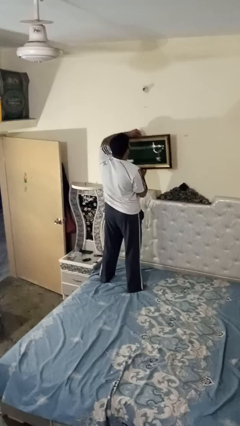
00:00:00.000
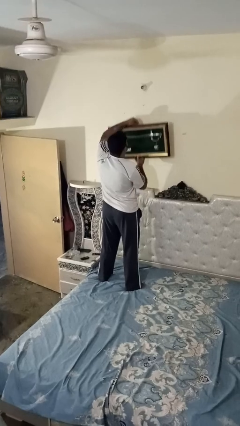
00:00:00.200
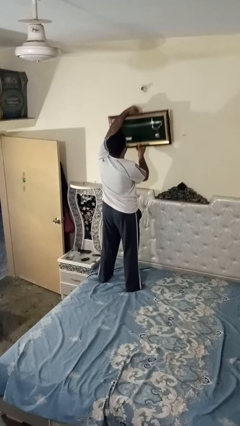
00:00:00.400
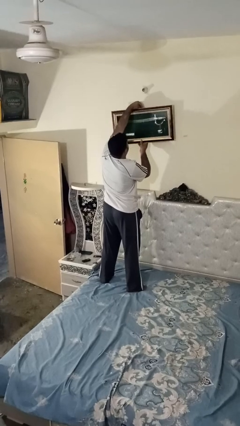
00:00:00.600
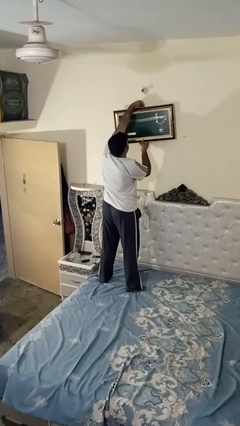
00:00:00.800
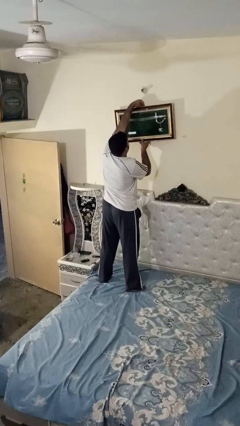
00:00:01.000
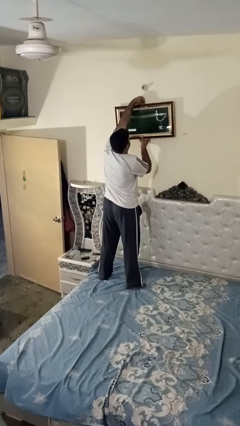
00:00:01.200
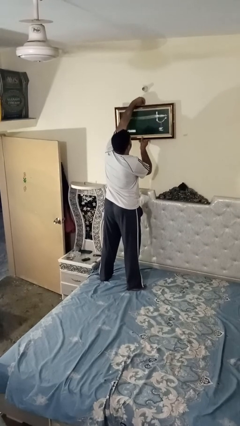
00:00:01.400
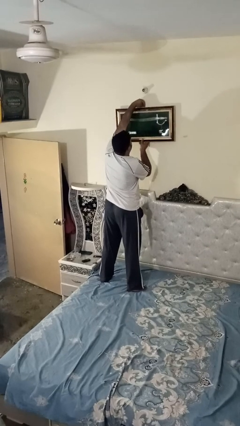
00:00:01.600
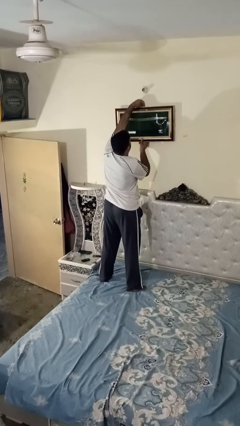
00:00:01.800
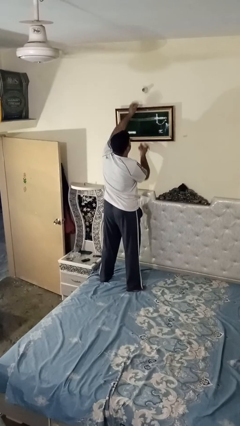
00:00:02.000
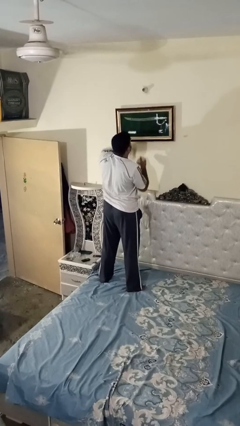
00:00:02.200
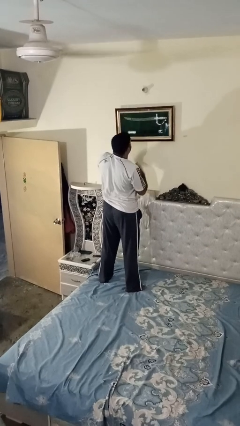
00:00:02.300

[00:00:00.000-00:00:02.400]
person puts up picture frame

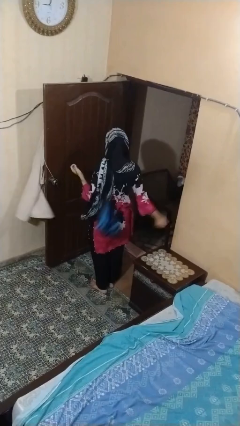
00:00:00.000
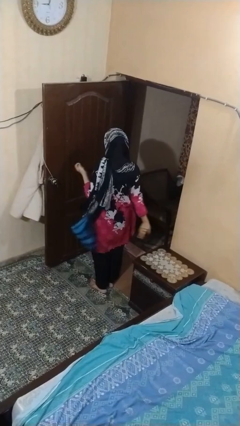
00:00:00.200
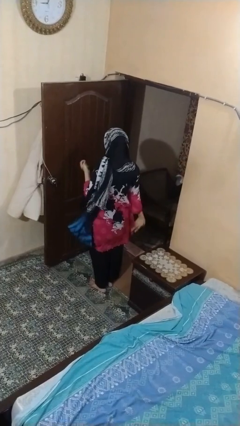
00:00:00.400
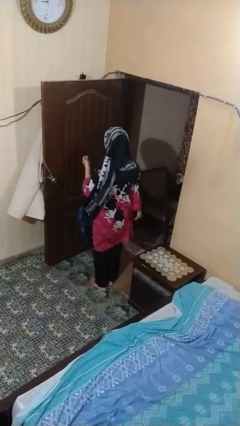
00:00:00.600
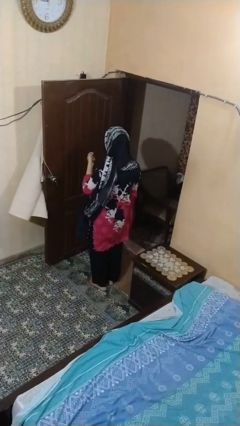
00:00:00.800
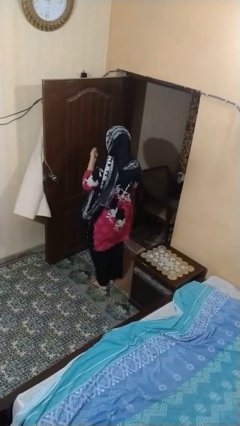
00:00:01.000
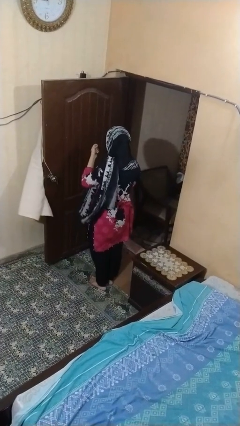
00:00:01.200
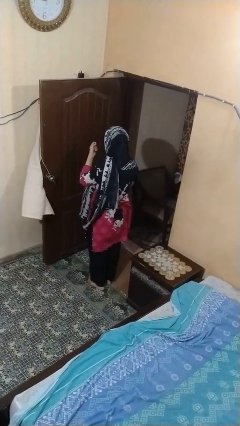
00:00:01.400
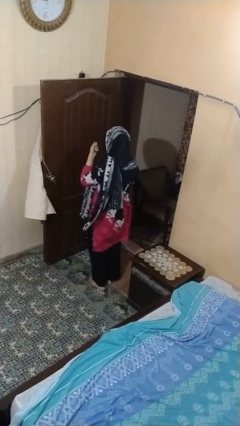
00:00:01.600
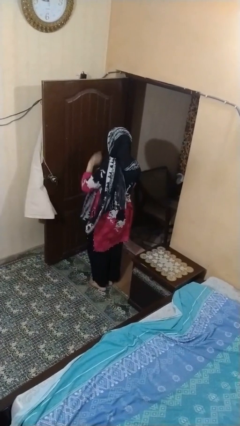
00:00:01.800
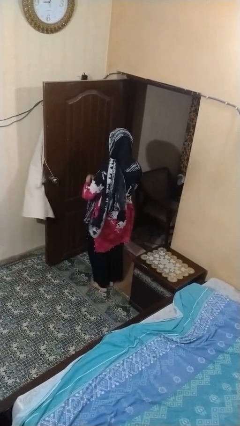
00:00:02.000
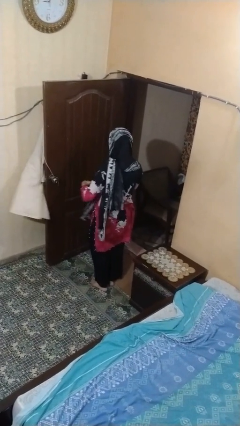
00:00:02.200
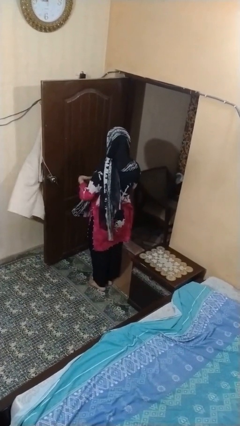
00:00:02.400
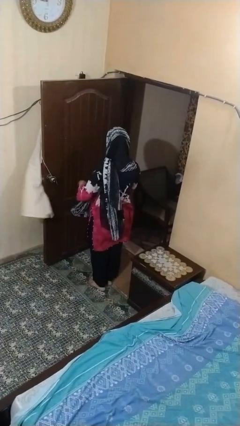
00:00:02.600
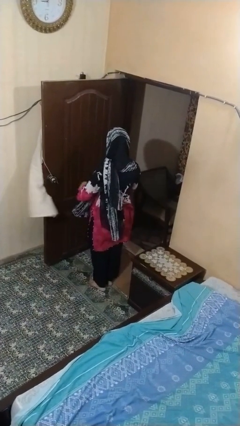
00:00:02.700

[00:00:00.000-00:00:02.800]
person takes off backpack

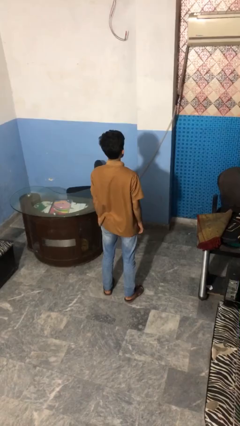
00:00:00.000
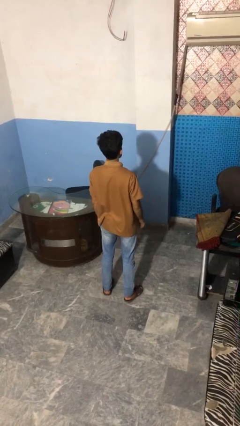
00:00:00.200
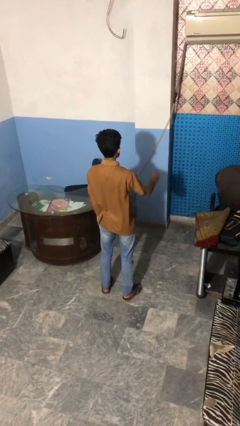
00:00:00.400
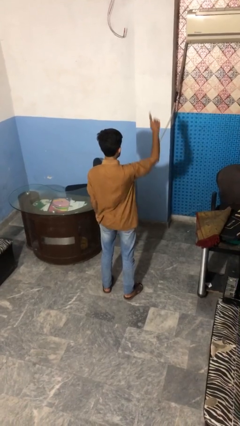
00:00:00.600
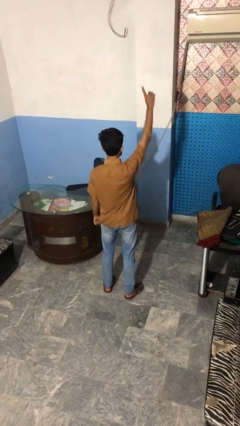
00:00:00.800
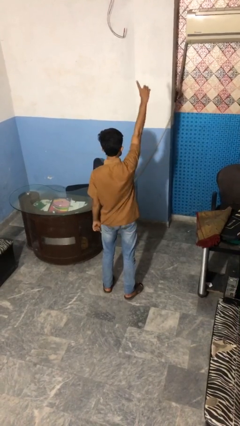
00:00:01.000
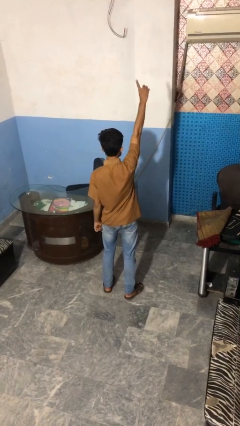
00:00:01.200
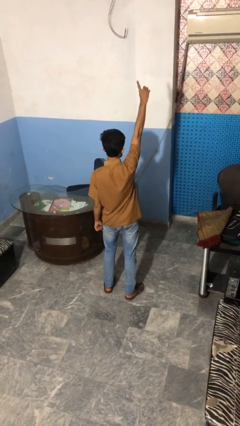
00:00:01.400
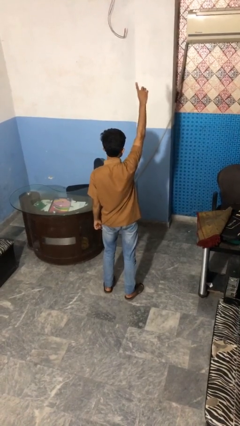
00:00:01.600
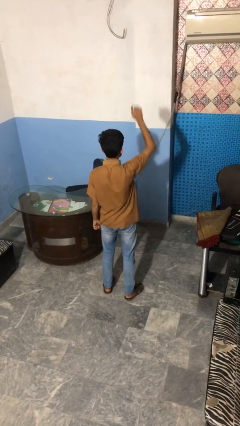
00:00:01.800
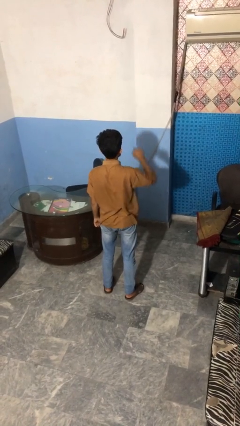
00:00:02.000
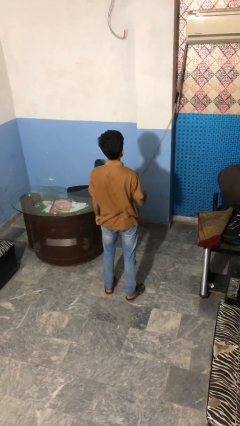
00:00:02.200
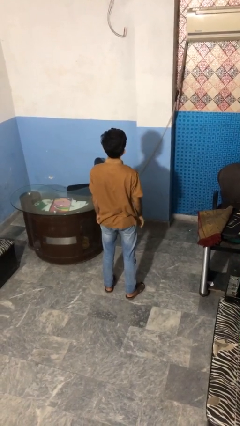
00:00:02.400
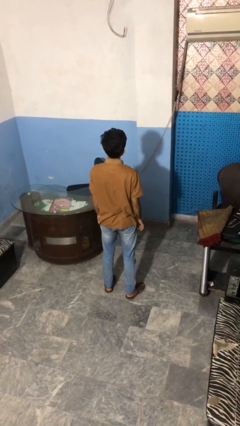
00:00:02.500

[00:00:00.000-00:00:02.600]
person gestures number one

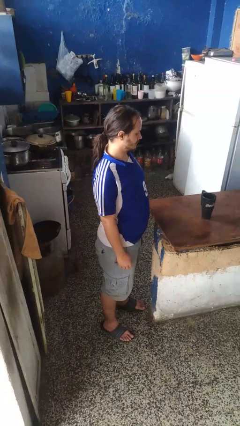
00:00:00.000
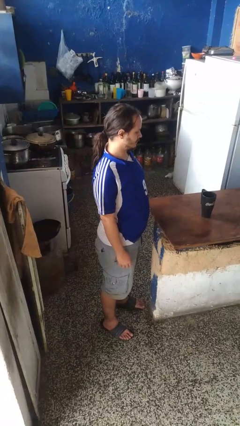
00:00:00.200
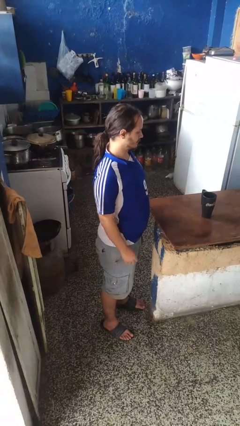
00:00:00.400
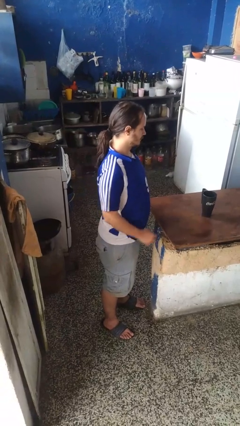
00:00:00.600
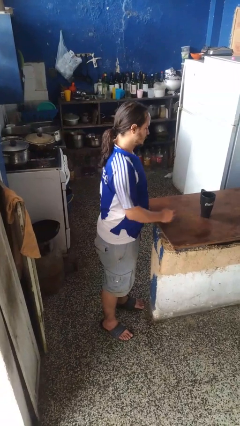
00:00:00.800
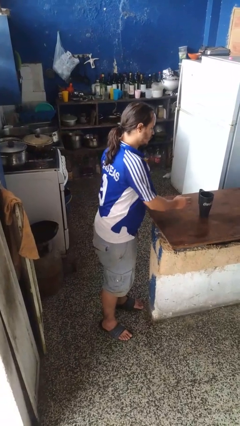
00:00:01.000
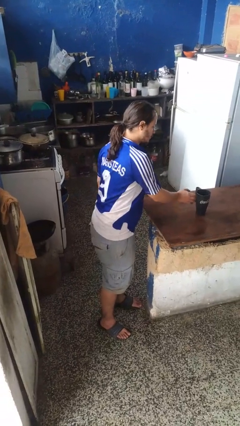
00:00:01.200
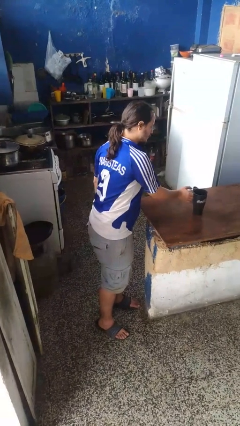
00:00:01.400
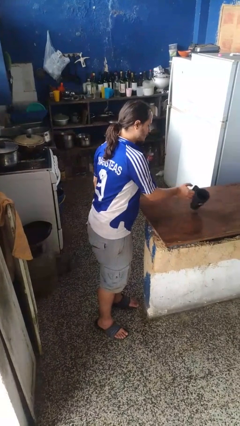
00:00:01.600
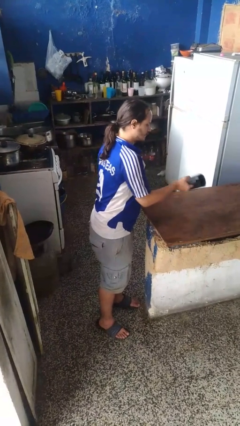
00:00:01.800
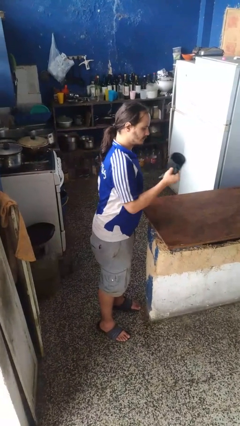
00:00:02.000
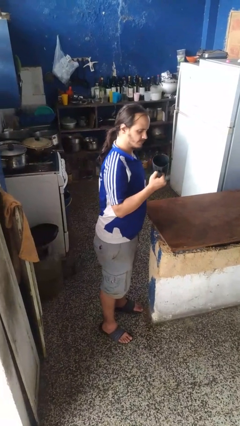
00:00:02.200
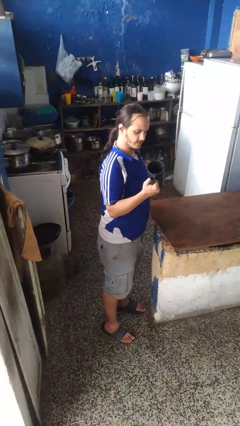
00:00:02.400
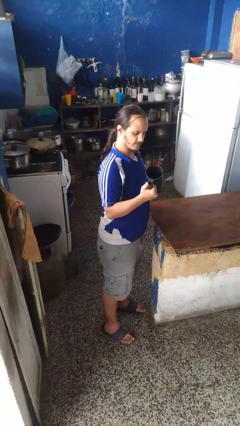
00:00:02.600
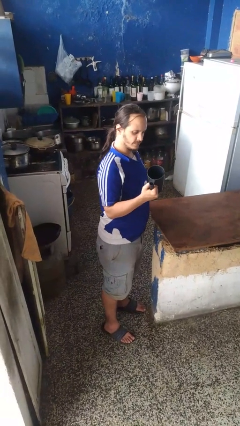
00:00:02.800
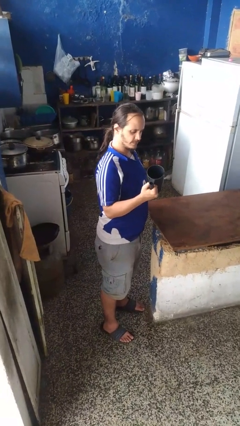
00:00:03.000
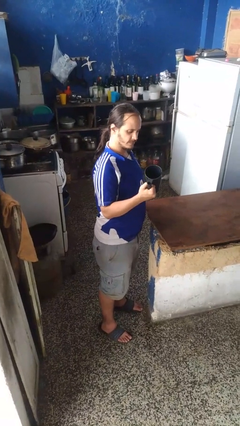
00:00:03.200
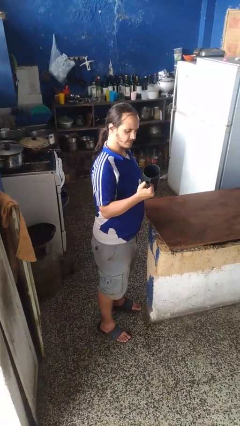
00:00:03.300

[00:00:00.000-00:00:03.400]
person picks up object from countertop

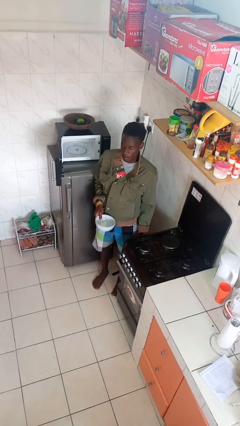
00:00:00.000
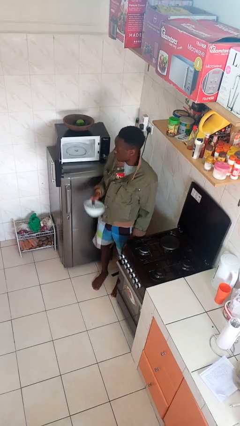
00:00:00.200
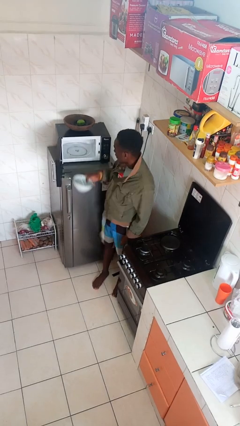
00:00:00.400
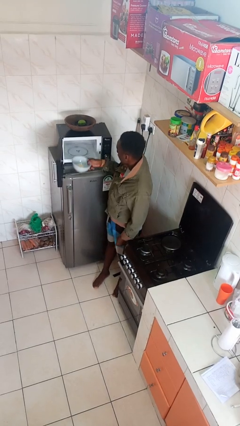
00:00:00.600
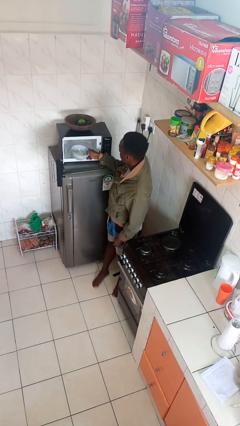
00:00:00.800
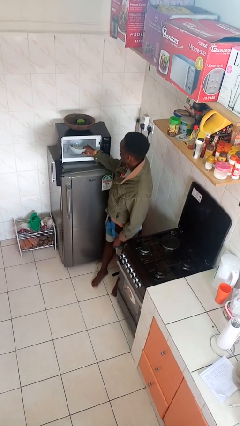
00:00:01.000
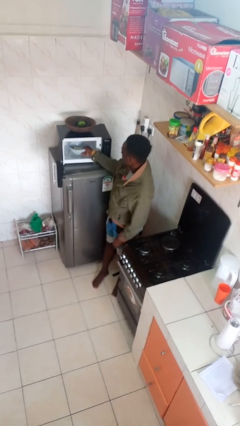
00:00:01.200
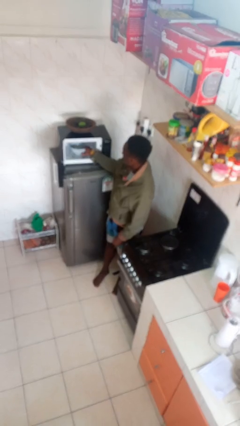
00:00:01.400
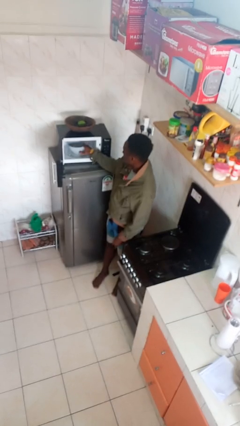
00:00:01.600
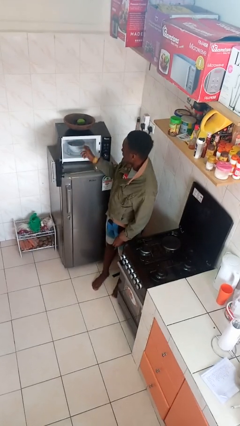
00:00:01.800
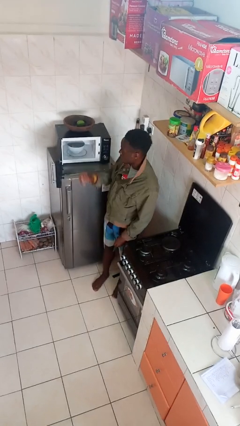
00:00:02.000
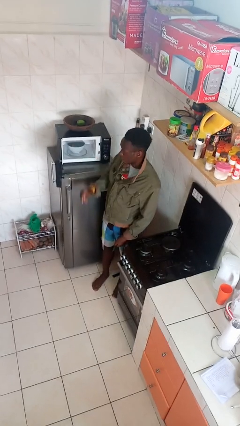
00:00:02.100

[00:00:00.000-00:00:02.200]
person puts object into microwave

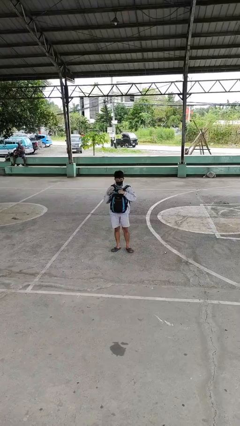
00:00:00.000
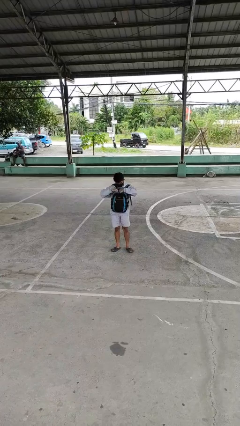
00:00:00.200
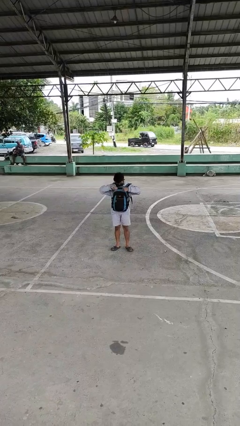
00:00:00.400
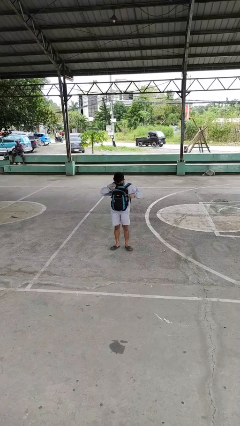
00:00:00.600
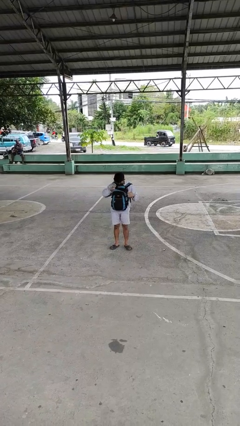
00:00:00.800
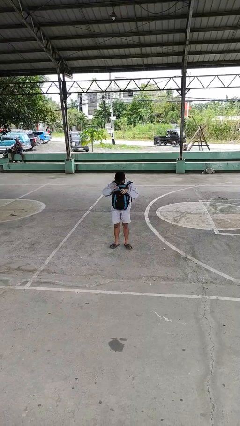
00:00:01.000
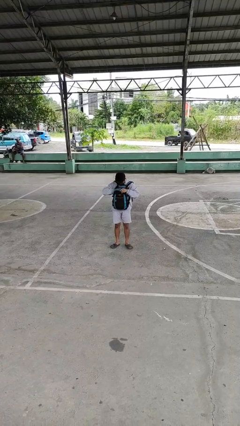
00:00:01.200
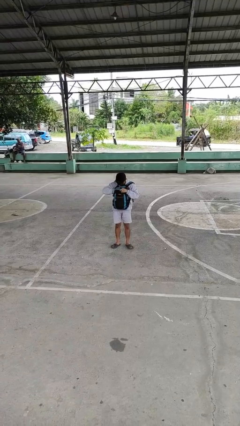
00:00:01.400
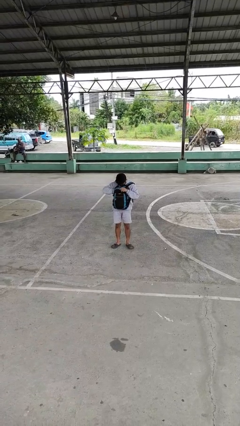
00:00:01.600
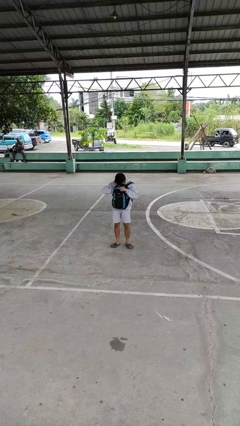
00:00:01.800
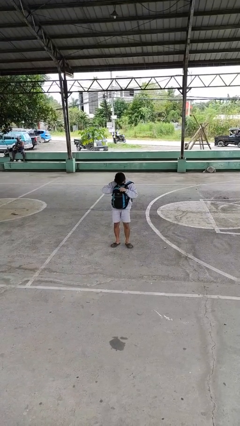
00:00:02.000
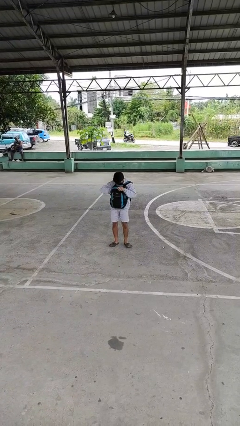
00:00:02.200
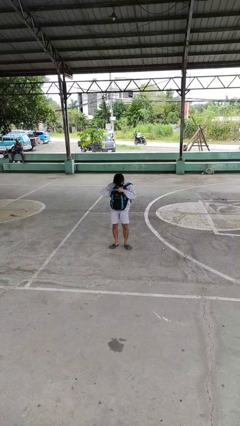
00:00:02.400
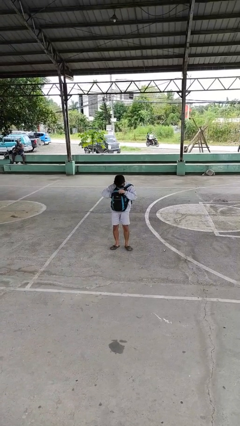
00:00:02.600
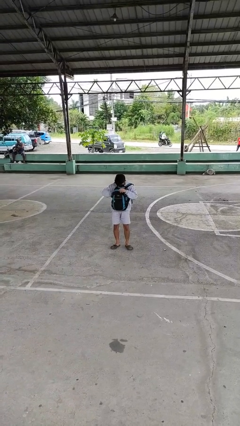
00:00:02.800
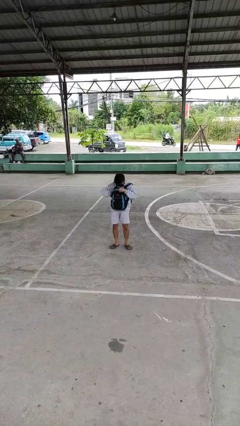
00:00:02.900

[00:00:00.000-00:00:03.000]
person searches in backpack

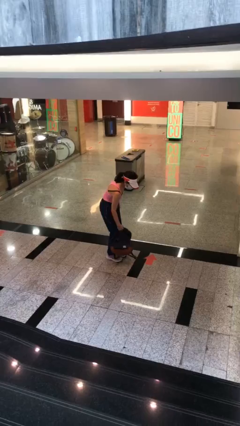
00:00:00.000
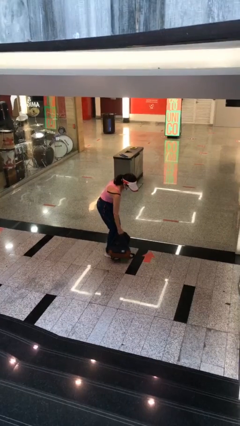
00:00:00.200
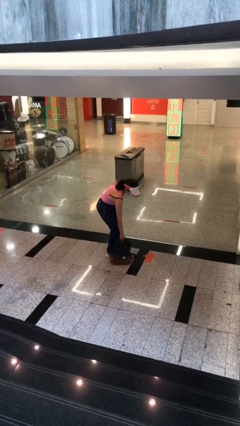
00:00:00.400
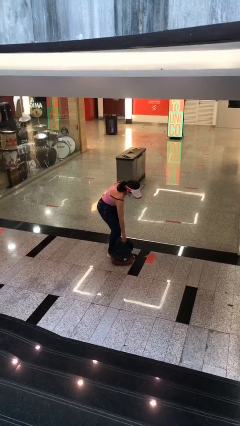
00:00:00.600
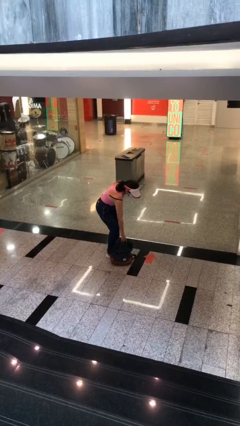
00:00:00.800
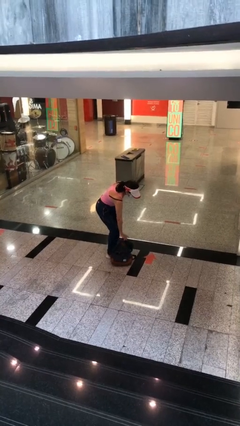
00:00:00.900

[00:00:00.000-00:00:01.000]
person puts down object on floor
